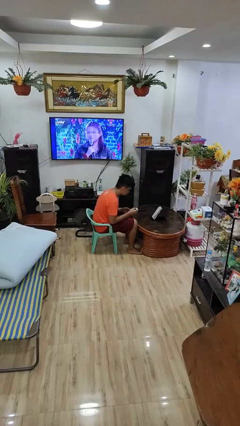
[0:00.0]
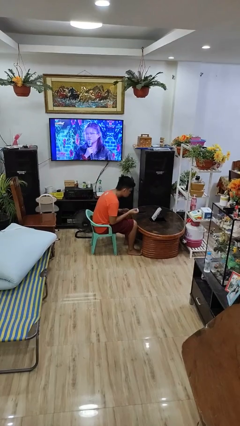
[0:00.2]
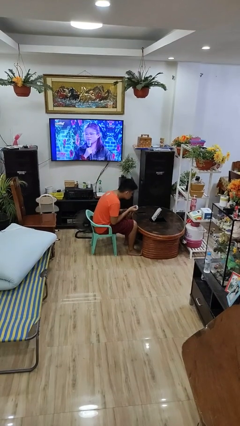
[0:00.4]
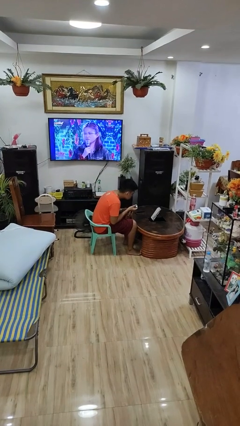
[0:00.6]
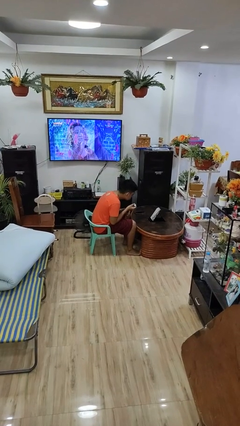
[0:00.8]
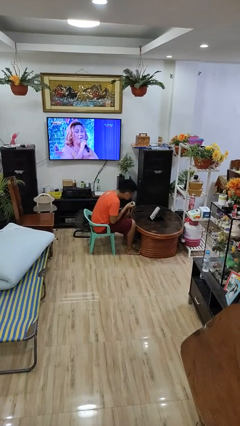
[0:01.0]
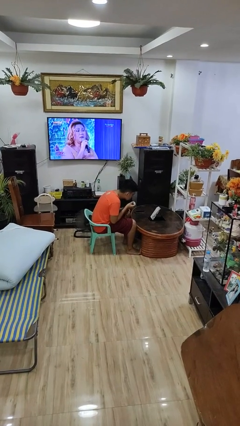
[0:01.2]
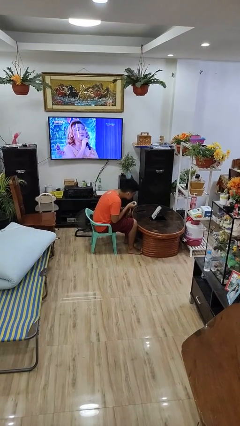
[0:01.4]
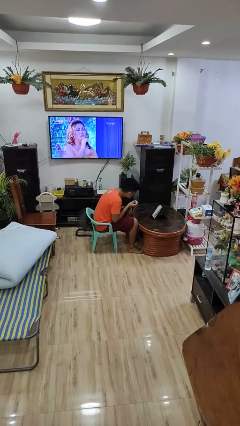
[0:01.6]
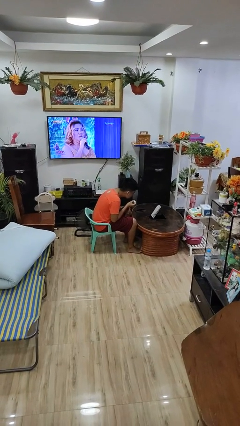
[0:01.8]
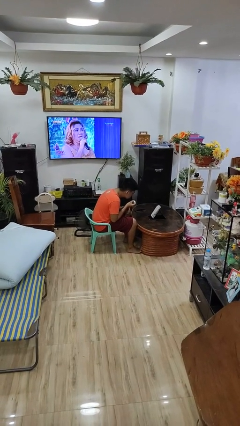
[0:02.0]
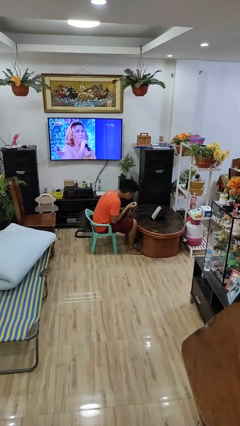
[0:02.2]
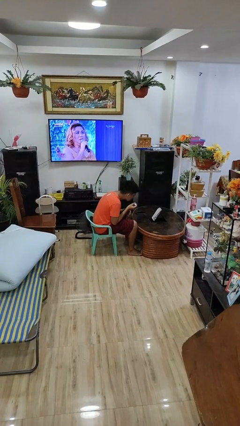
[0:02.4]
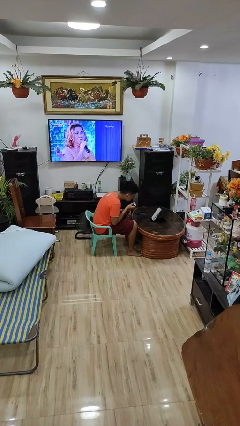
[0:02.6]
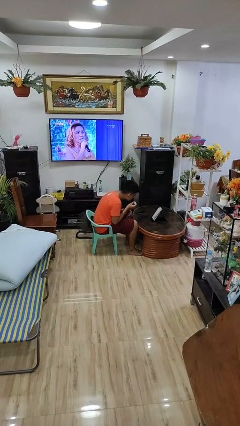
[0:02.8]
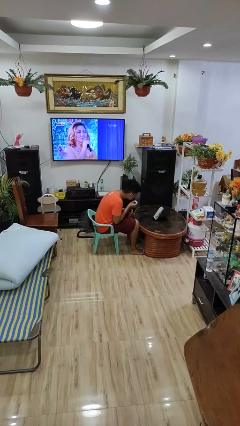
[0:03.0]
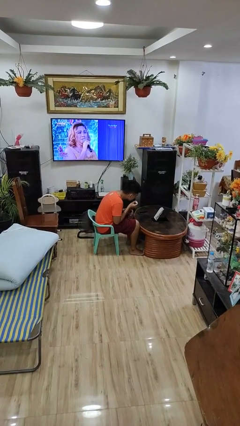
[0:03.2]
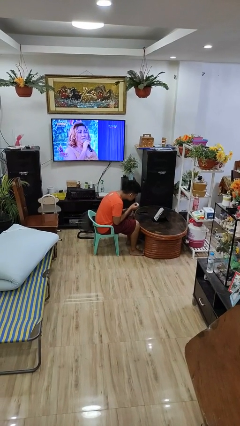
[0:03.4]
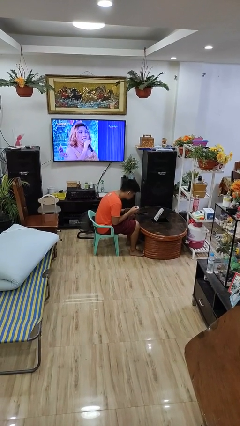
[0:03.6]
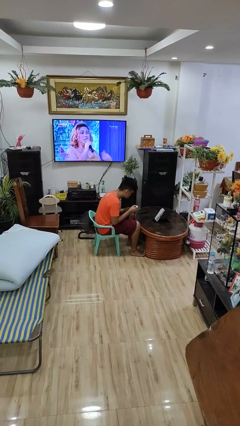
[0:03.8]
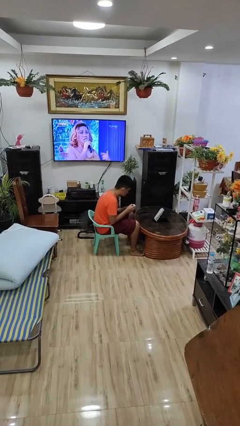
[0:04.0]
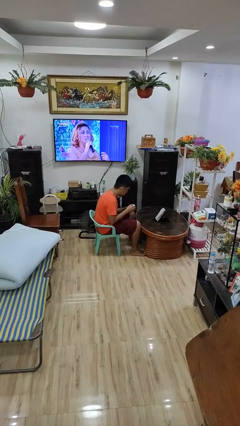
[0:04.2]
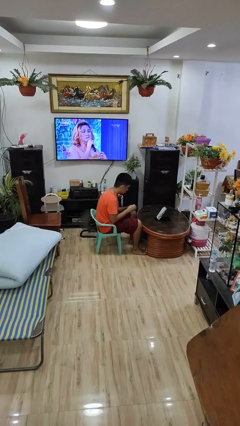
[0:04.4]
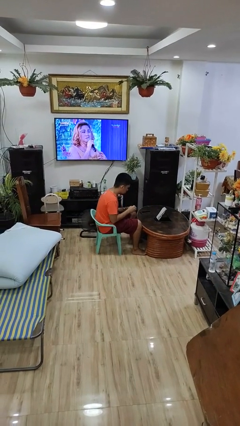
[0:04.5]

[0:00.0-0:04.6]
person applies lip makeup

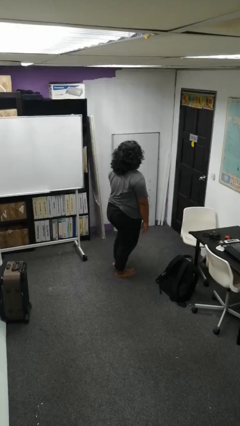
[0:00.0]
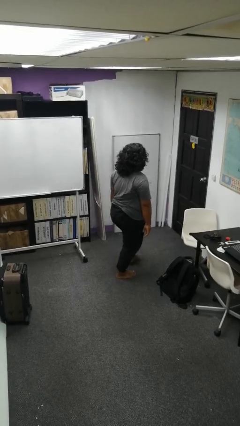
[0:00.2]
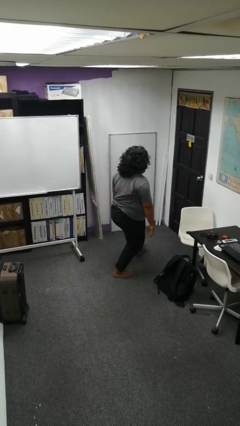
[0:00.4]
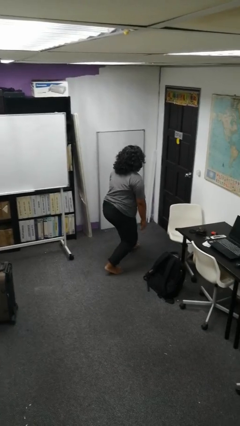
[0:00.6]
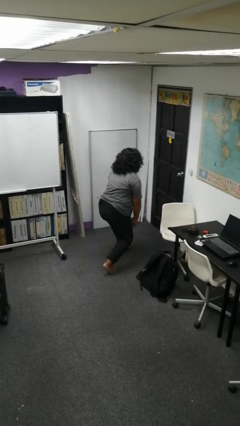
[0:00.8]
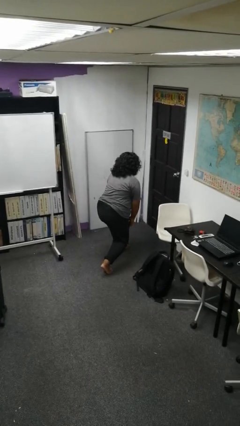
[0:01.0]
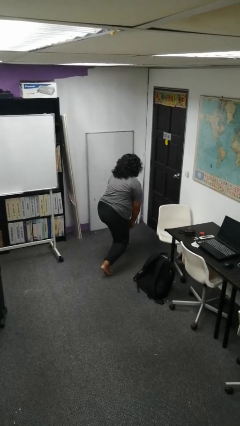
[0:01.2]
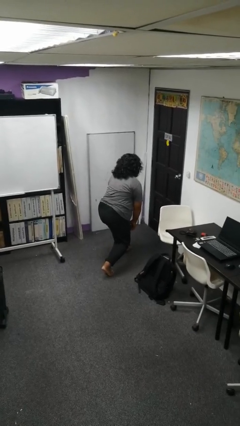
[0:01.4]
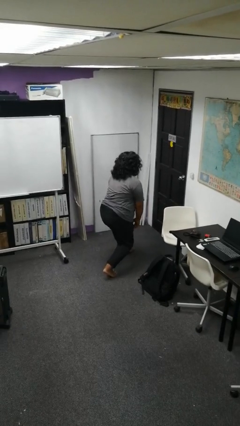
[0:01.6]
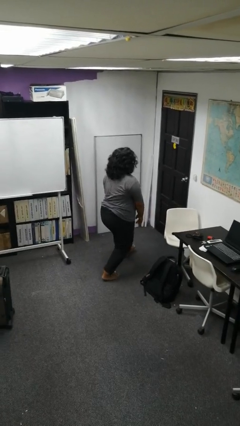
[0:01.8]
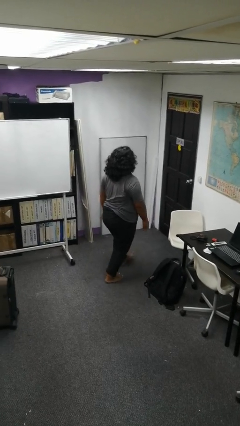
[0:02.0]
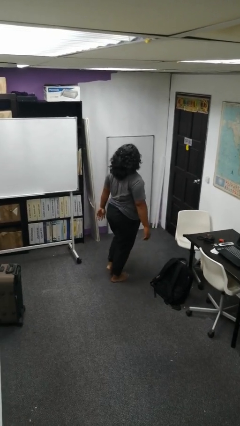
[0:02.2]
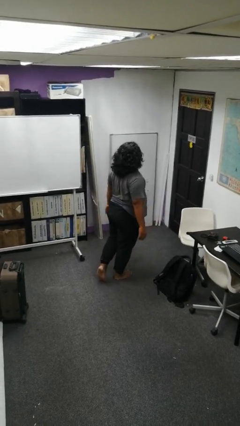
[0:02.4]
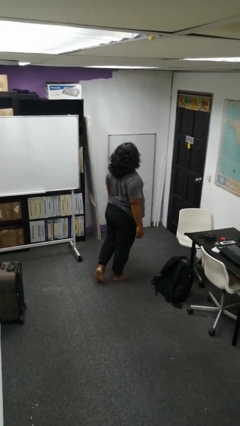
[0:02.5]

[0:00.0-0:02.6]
person exercises with lunges

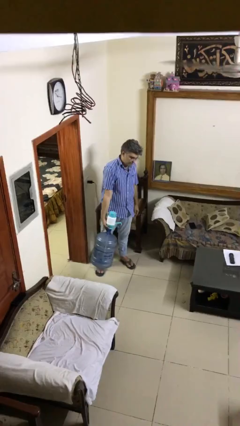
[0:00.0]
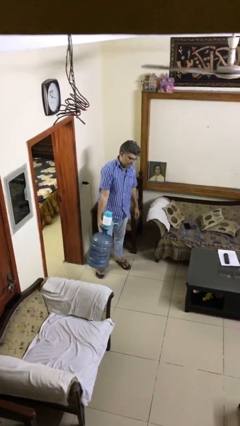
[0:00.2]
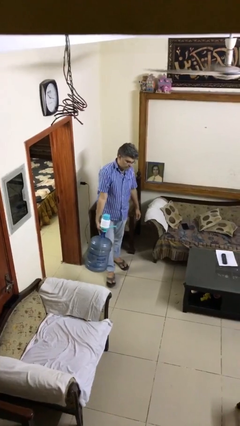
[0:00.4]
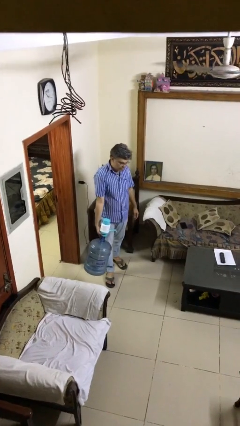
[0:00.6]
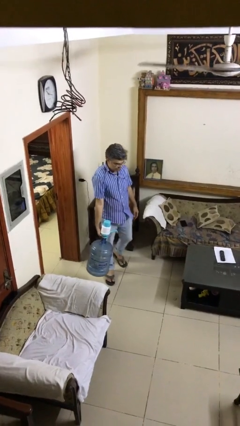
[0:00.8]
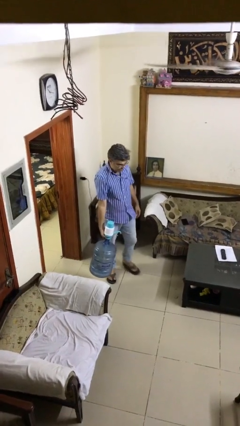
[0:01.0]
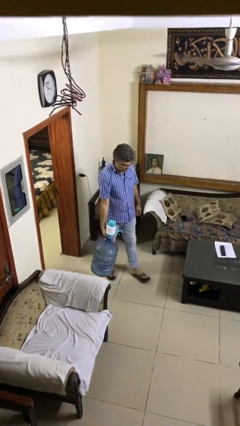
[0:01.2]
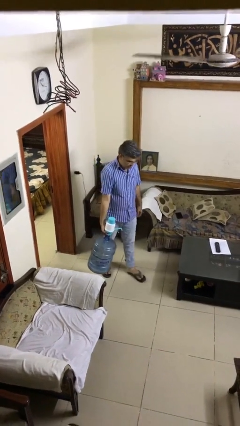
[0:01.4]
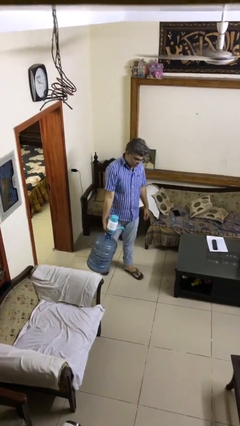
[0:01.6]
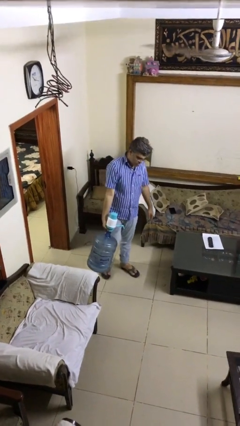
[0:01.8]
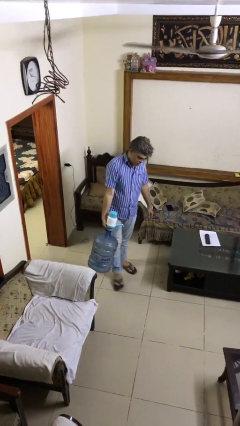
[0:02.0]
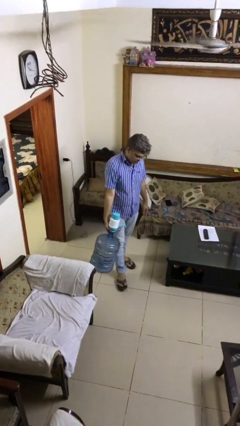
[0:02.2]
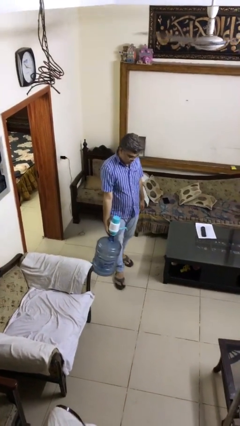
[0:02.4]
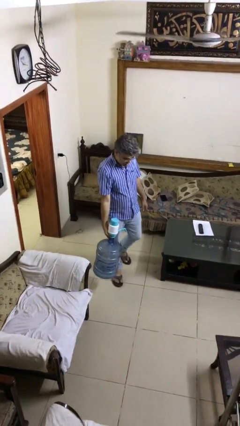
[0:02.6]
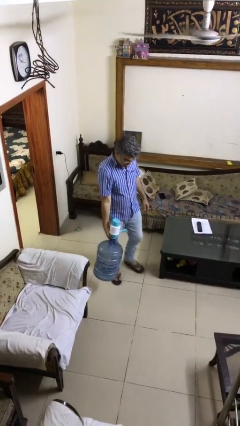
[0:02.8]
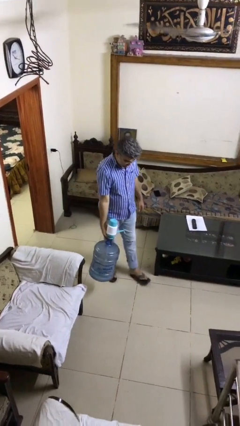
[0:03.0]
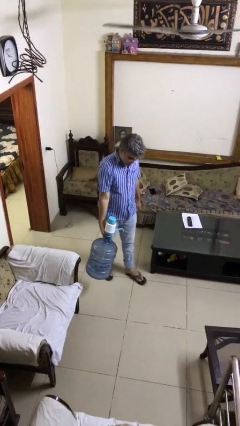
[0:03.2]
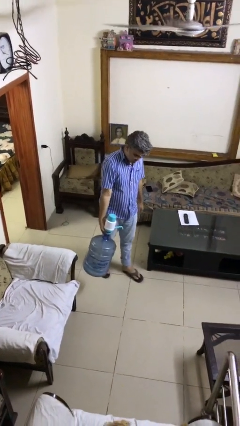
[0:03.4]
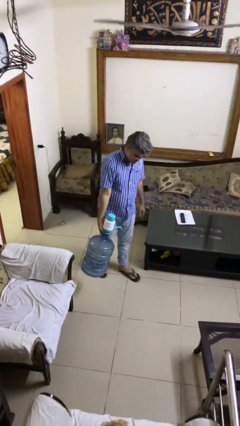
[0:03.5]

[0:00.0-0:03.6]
person carries heavy object

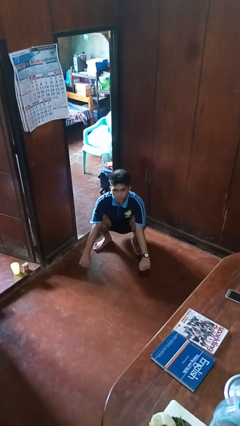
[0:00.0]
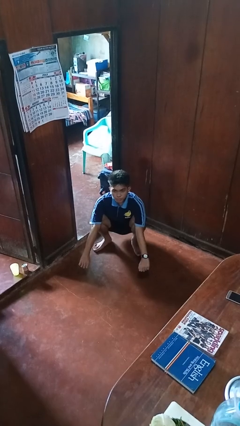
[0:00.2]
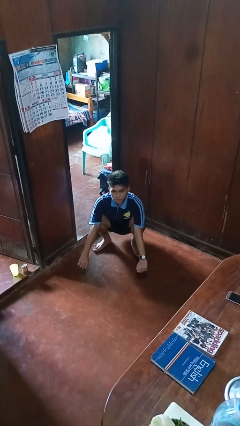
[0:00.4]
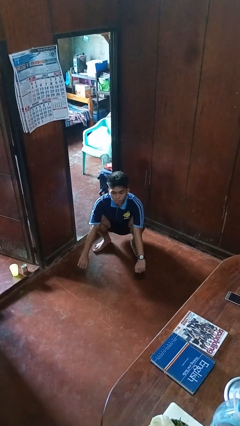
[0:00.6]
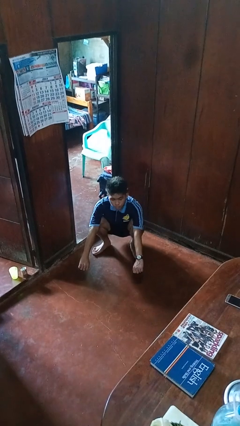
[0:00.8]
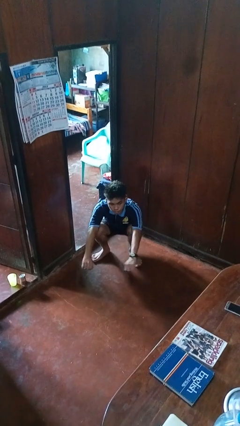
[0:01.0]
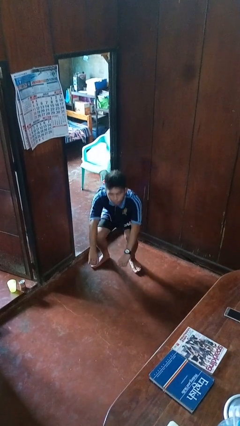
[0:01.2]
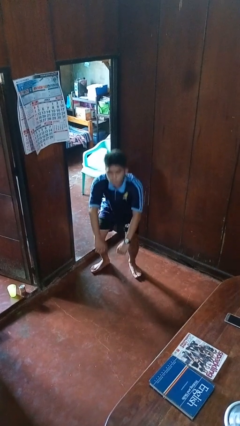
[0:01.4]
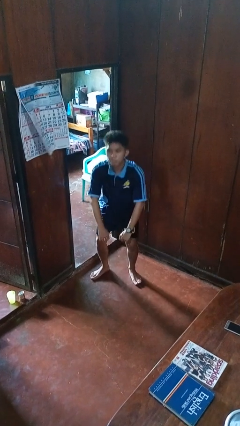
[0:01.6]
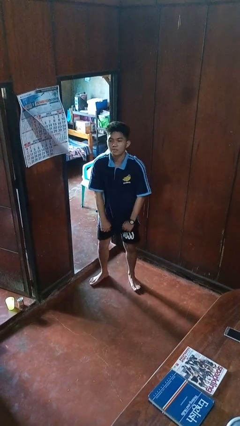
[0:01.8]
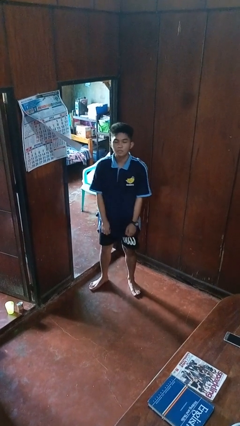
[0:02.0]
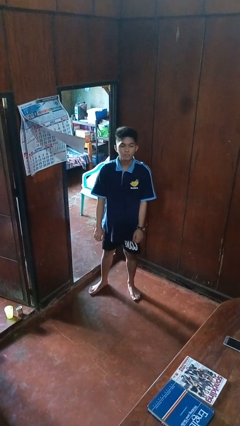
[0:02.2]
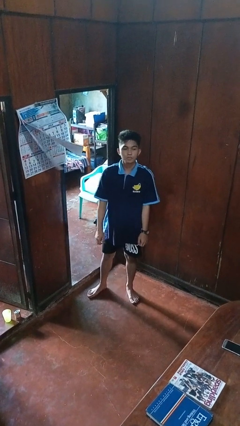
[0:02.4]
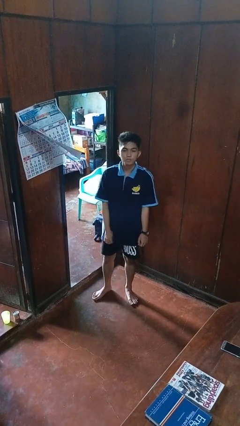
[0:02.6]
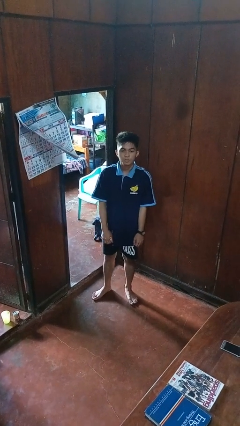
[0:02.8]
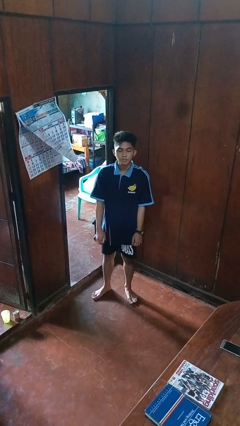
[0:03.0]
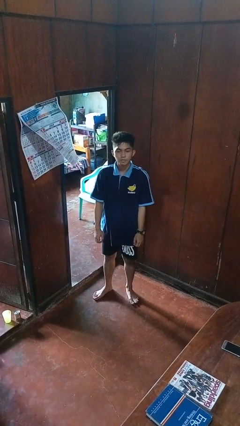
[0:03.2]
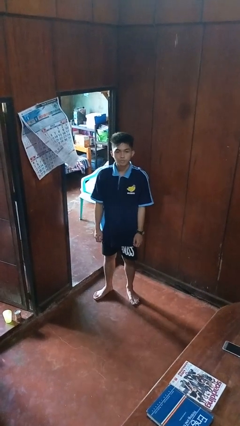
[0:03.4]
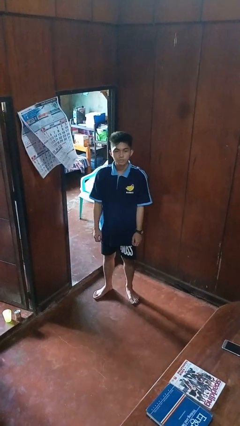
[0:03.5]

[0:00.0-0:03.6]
person stands up

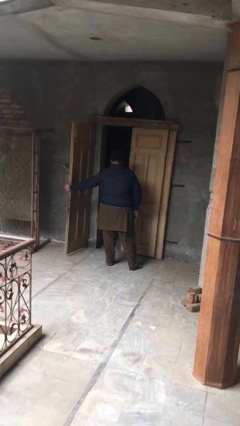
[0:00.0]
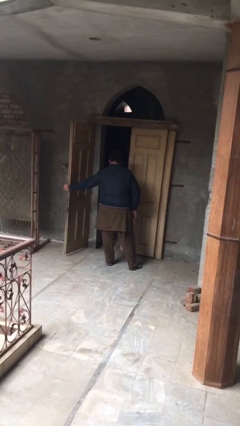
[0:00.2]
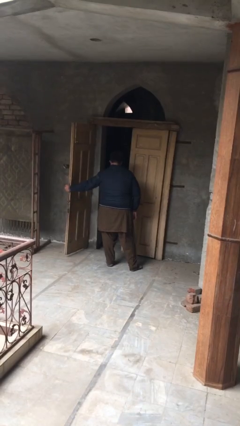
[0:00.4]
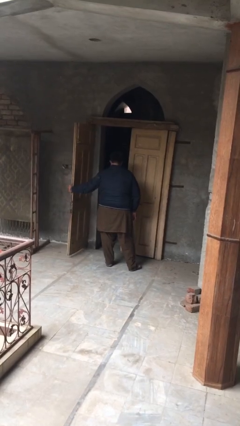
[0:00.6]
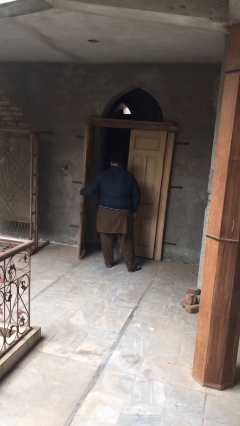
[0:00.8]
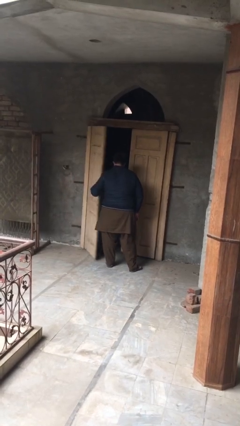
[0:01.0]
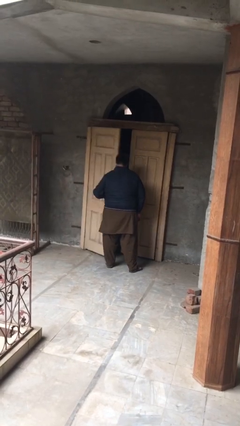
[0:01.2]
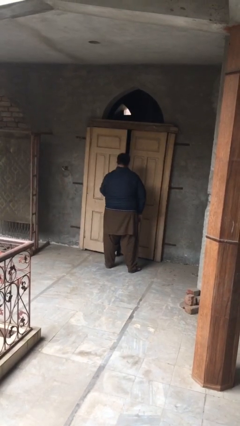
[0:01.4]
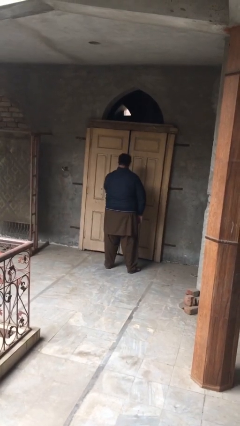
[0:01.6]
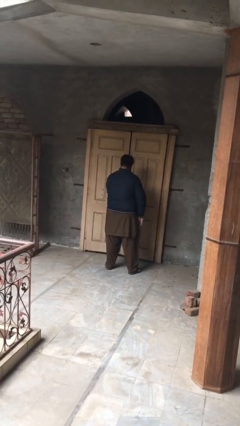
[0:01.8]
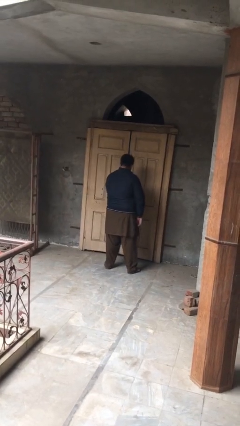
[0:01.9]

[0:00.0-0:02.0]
person closes facility door

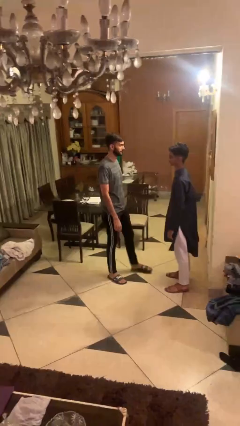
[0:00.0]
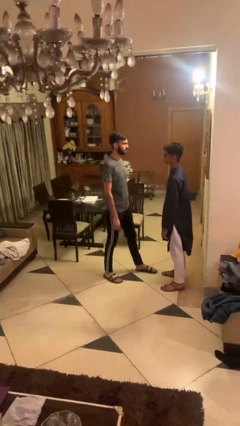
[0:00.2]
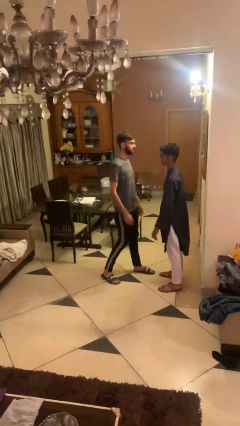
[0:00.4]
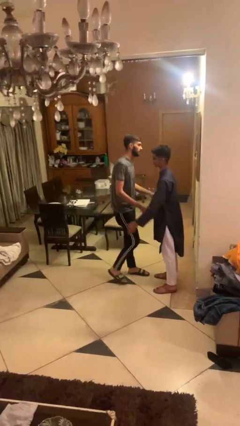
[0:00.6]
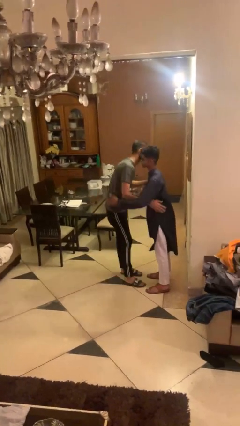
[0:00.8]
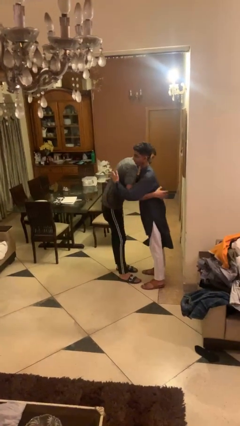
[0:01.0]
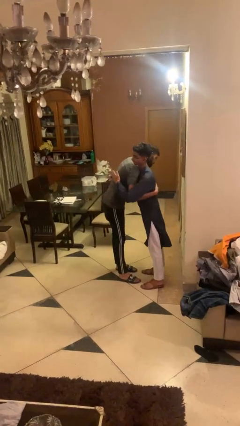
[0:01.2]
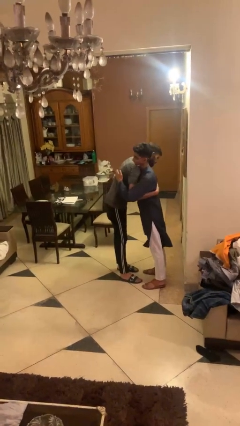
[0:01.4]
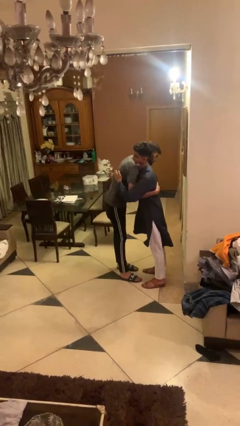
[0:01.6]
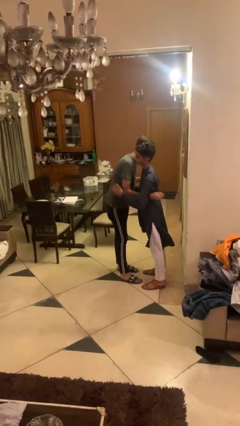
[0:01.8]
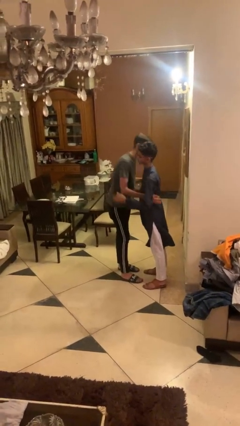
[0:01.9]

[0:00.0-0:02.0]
person embraces person
